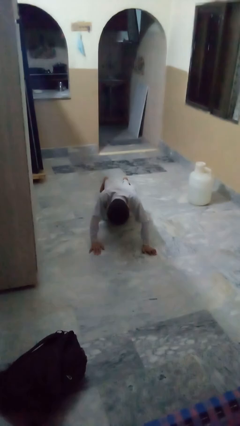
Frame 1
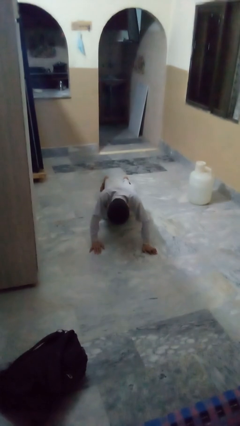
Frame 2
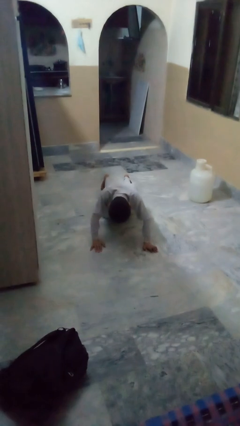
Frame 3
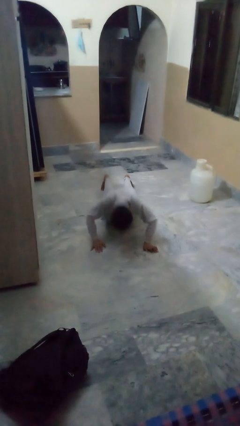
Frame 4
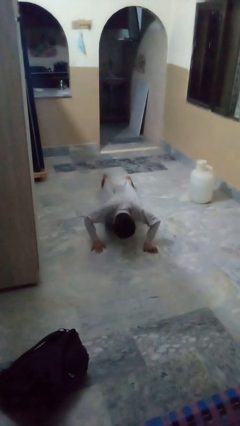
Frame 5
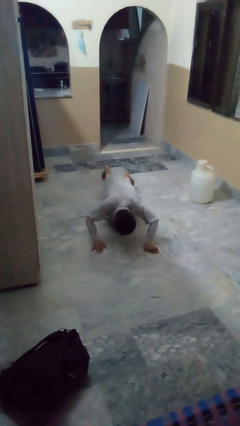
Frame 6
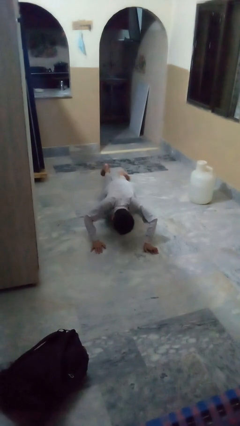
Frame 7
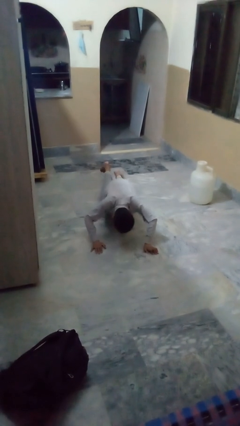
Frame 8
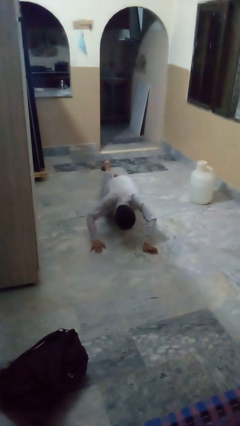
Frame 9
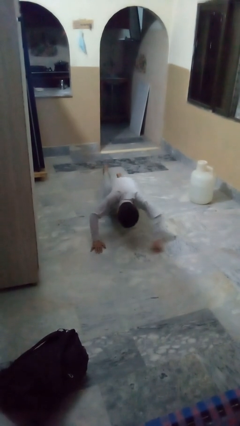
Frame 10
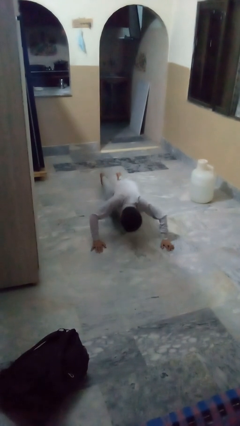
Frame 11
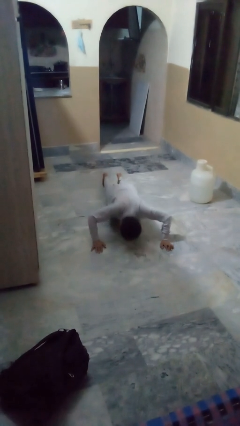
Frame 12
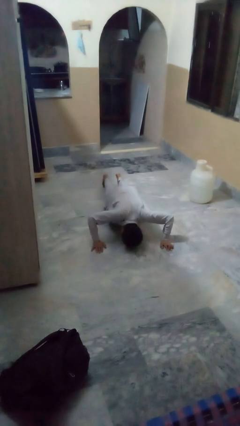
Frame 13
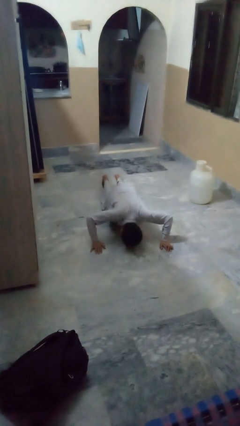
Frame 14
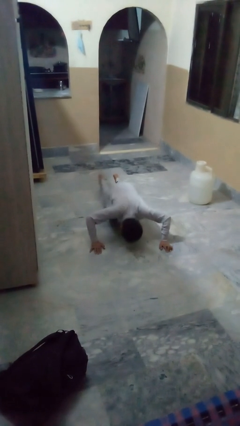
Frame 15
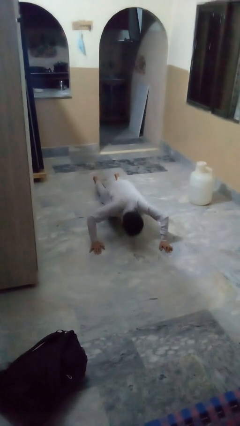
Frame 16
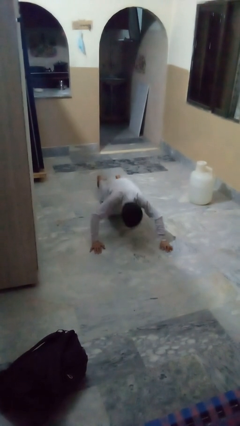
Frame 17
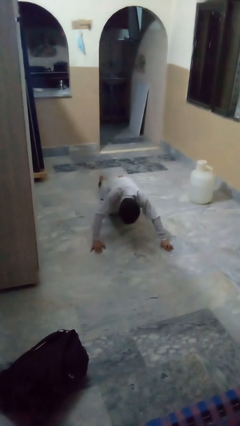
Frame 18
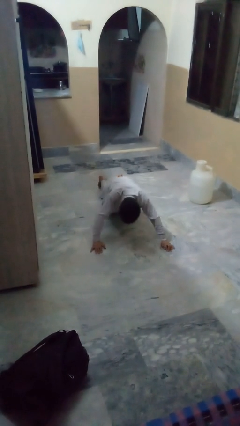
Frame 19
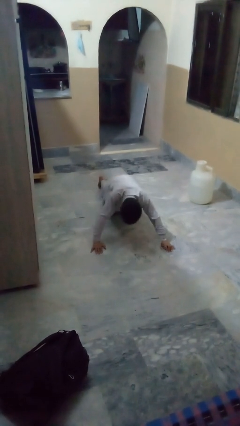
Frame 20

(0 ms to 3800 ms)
person exercises with pushup

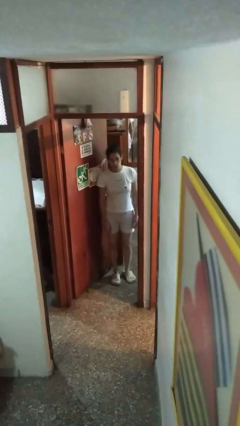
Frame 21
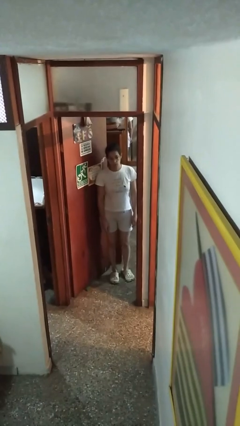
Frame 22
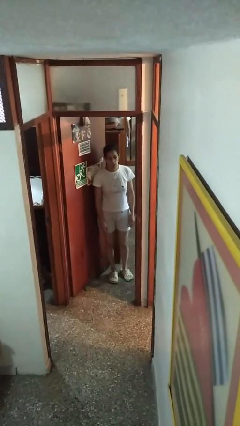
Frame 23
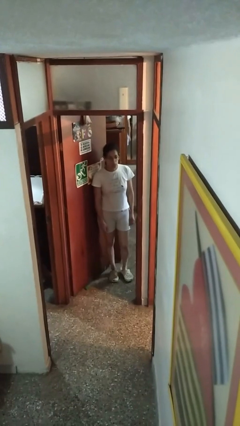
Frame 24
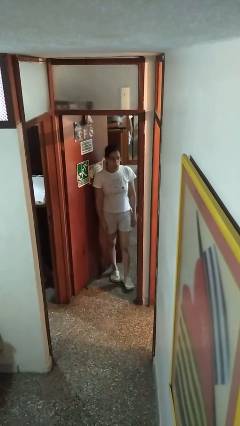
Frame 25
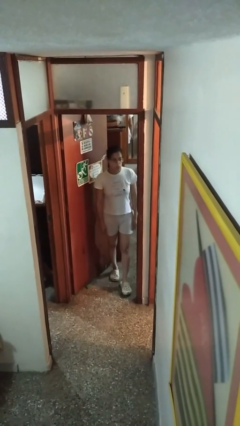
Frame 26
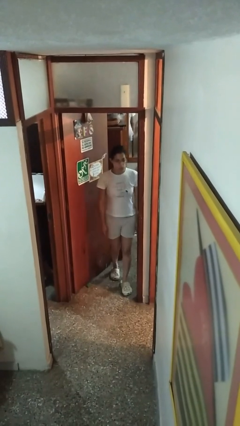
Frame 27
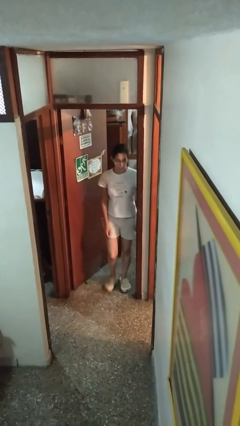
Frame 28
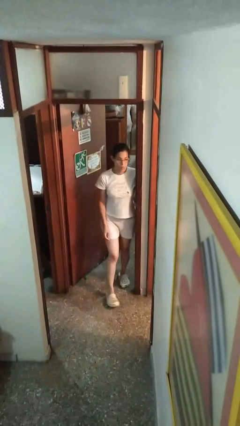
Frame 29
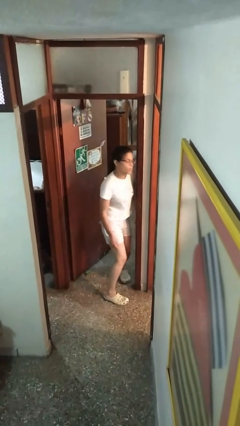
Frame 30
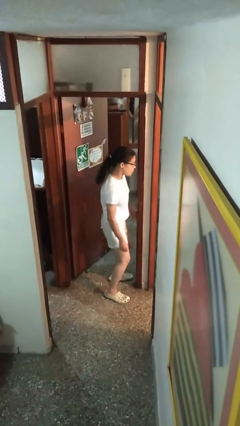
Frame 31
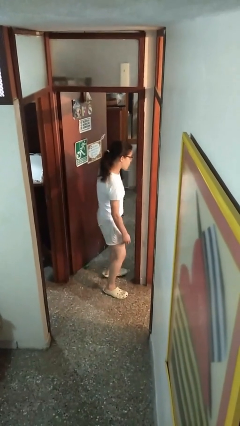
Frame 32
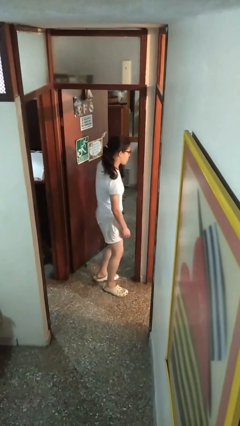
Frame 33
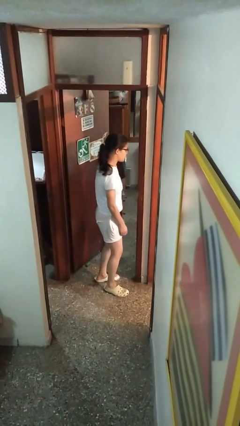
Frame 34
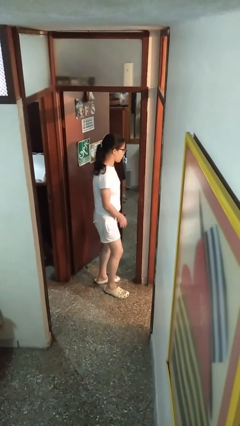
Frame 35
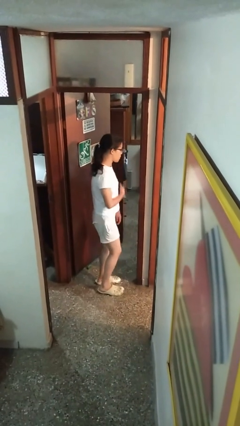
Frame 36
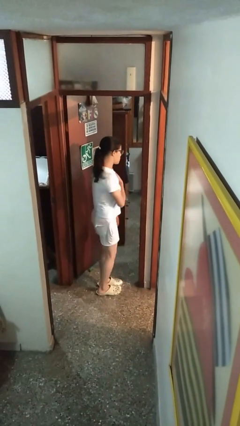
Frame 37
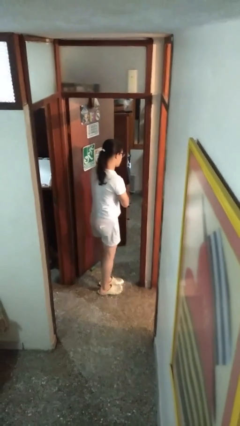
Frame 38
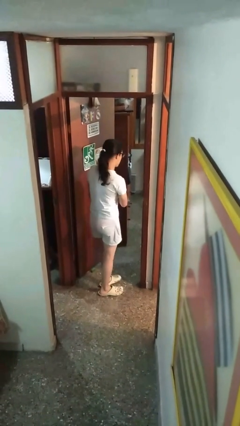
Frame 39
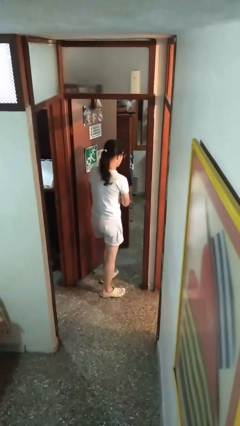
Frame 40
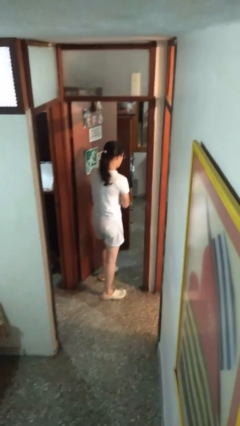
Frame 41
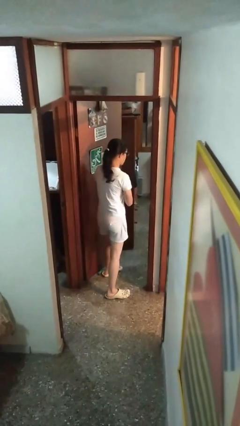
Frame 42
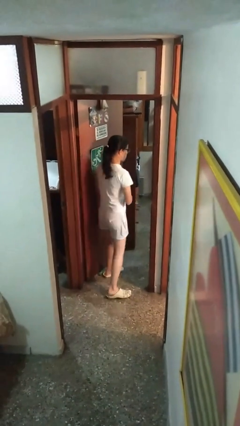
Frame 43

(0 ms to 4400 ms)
person bumps into wall

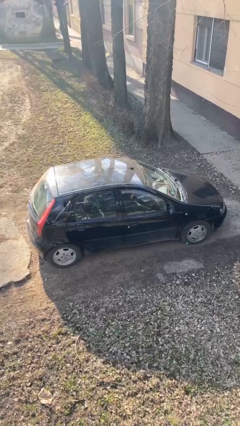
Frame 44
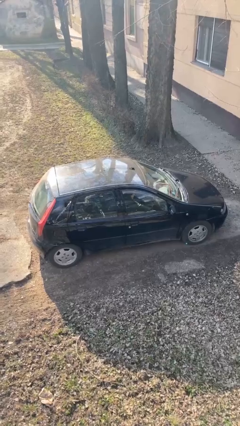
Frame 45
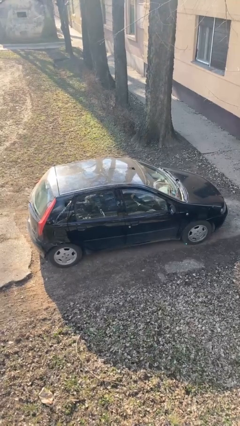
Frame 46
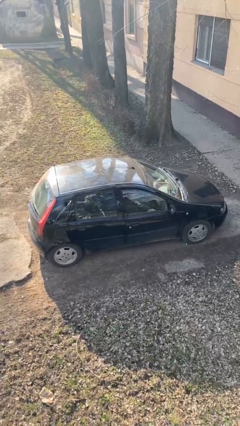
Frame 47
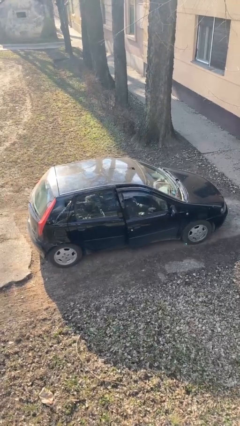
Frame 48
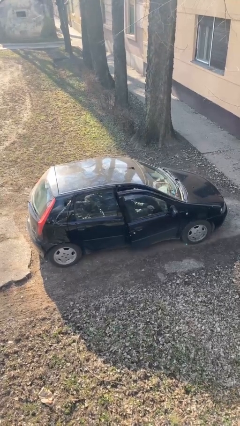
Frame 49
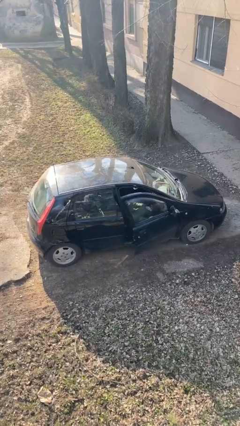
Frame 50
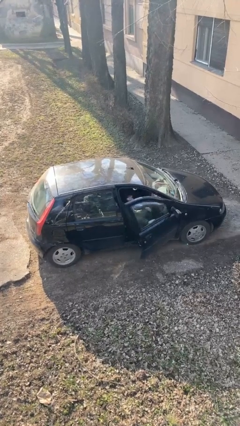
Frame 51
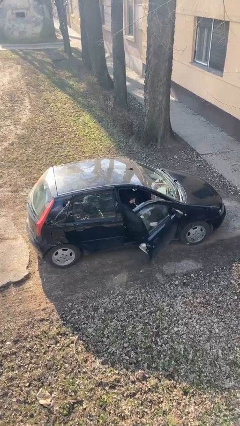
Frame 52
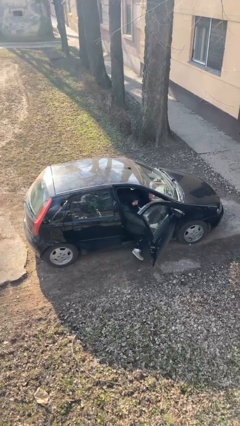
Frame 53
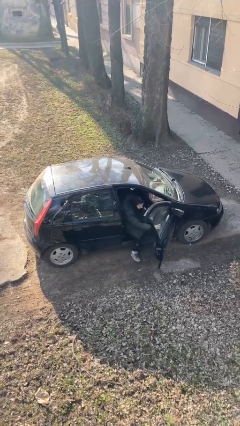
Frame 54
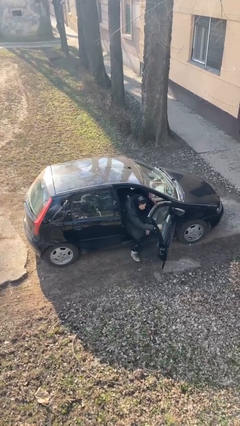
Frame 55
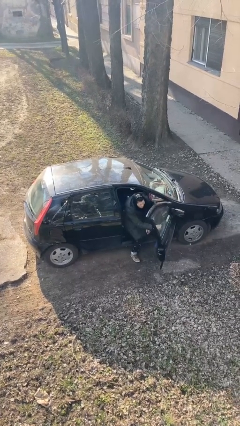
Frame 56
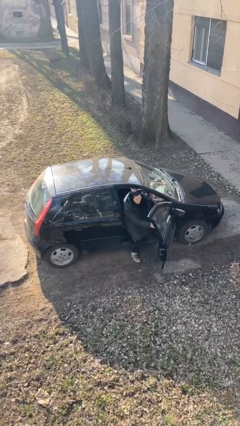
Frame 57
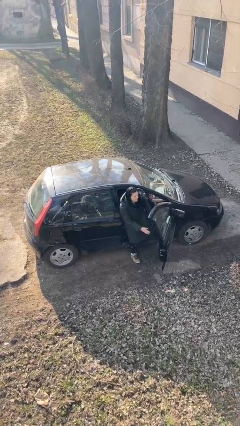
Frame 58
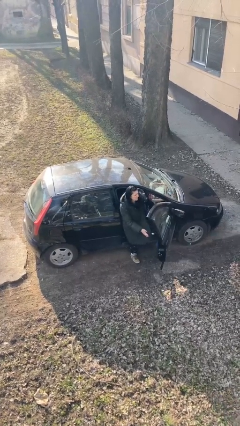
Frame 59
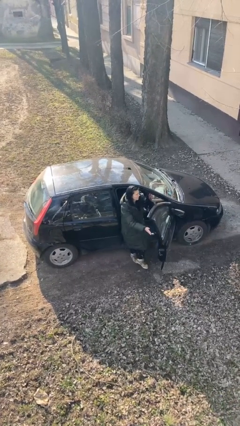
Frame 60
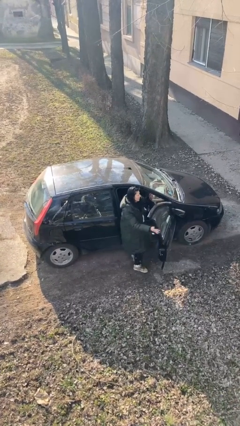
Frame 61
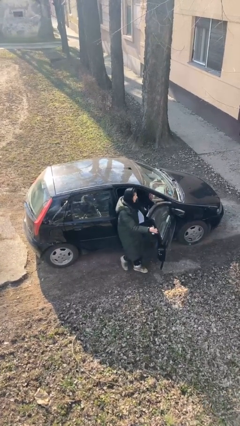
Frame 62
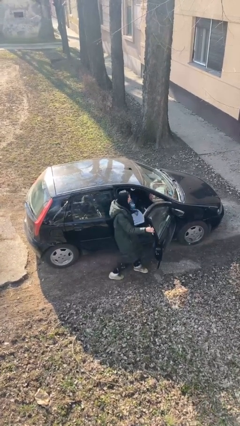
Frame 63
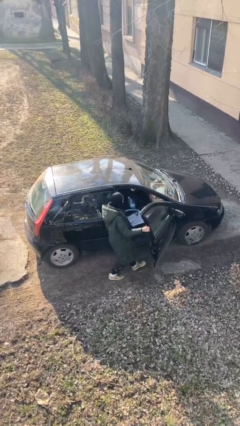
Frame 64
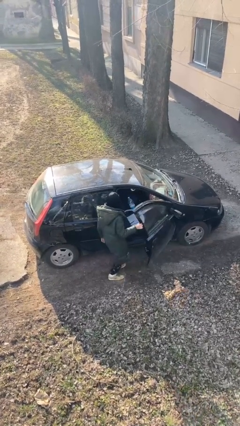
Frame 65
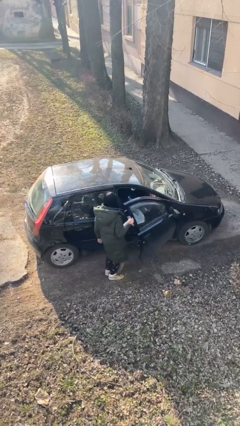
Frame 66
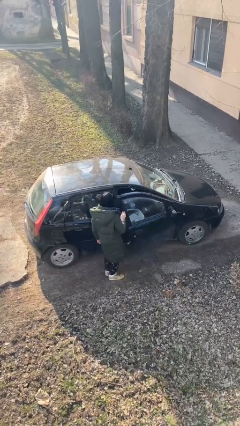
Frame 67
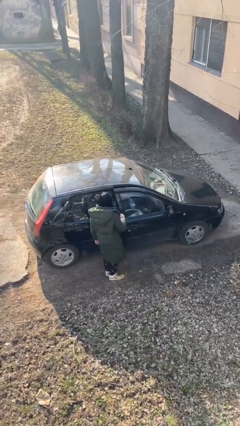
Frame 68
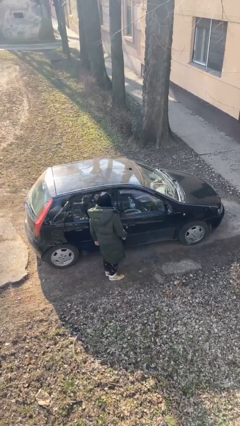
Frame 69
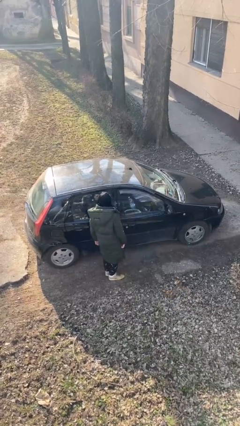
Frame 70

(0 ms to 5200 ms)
car drops off person

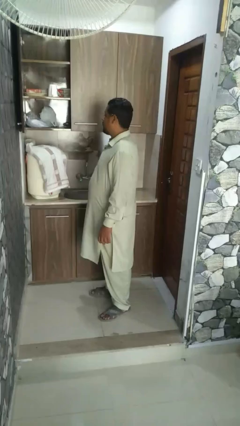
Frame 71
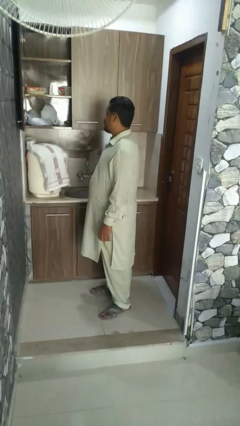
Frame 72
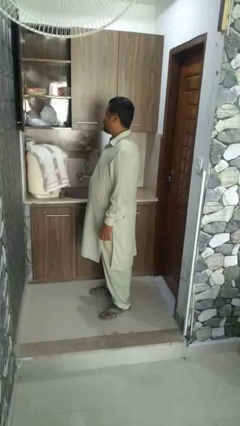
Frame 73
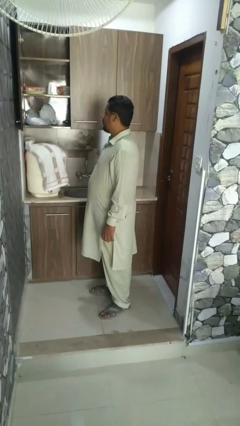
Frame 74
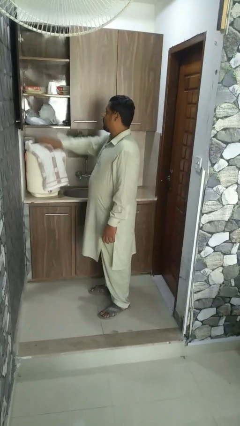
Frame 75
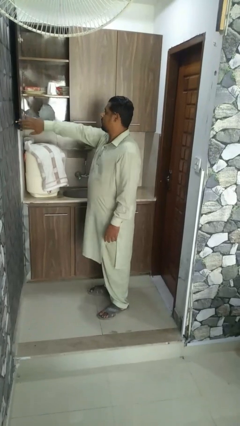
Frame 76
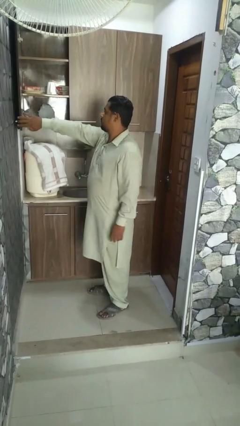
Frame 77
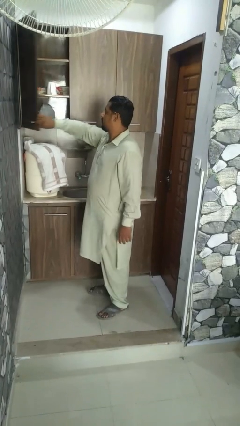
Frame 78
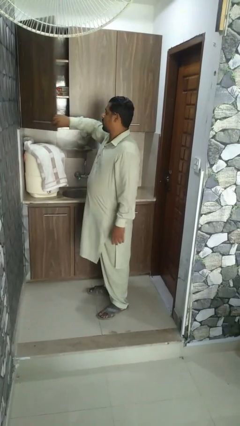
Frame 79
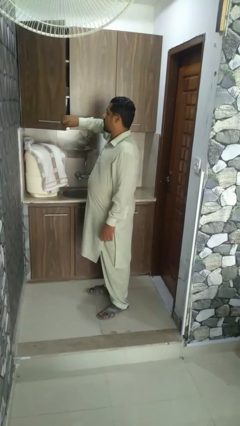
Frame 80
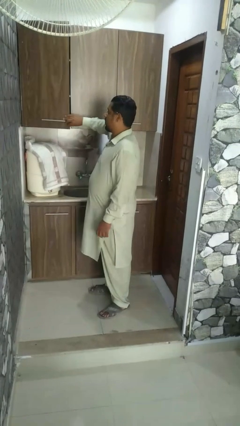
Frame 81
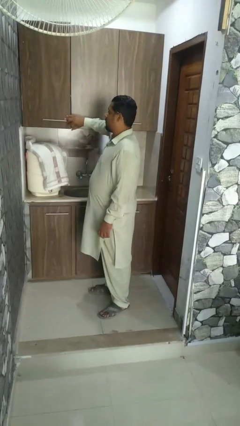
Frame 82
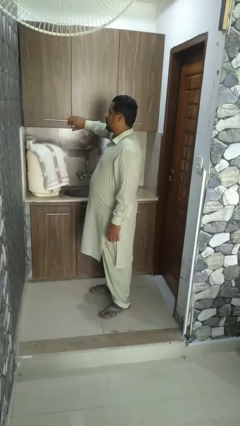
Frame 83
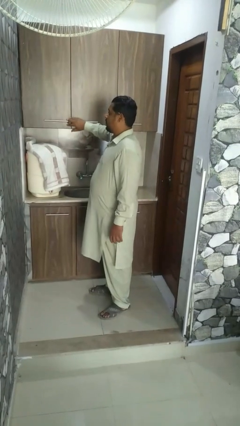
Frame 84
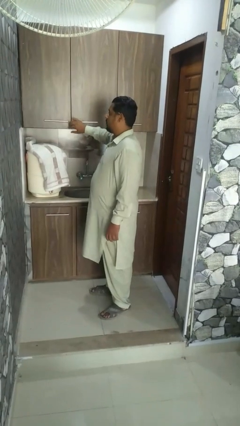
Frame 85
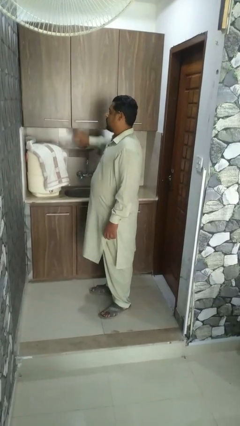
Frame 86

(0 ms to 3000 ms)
person closes microwave

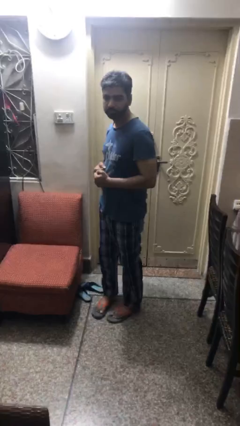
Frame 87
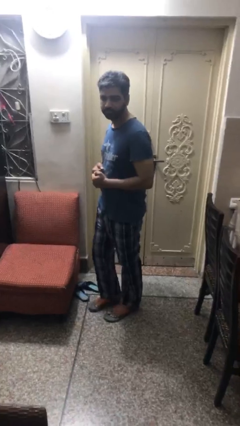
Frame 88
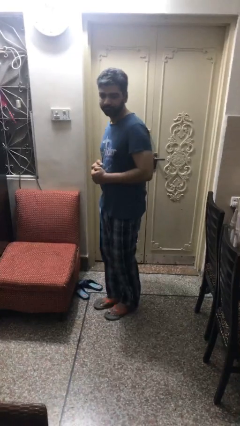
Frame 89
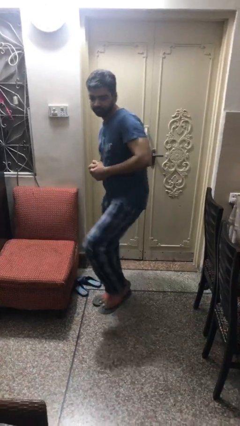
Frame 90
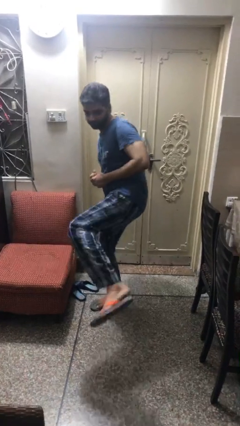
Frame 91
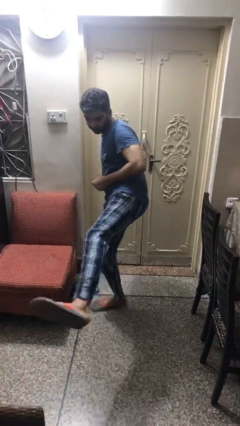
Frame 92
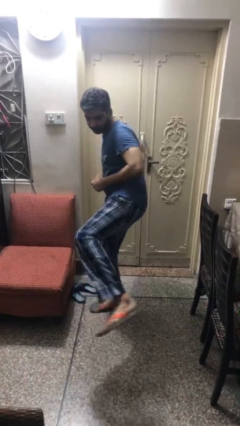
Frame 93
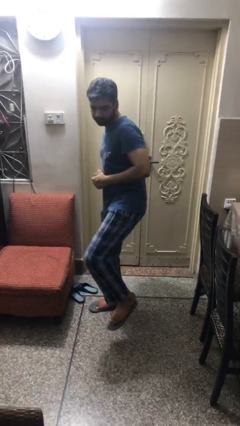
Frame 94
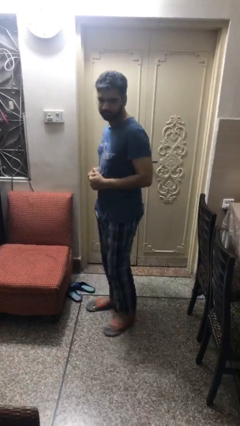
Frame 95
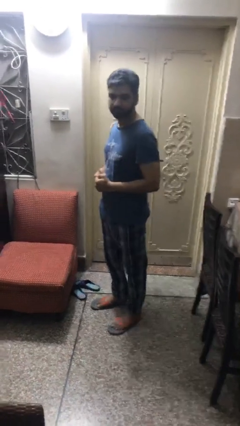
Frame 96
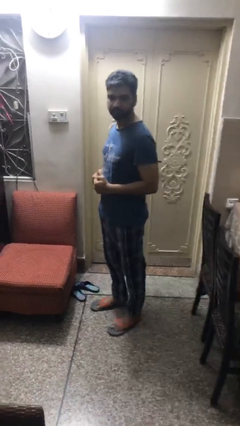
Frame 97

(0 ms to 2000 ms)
person karate kicks
